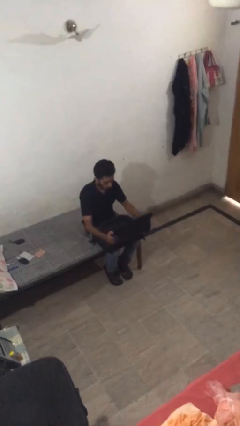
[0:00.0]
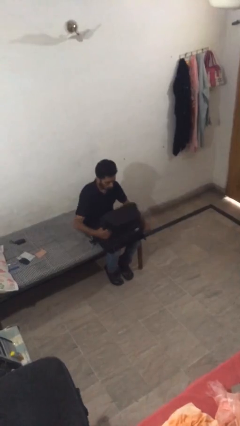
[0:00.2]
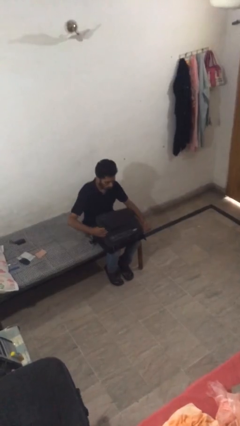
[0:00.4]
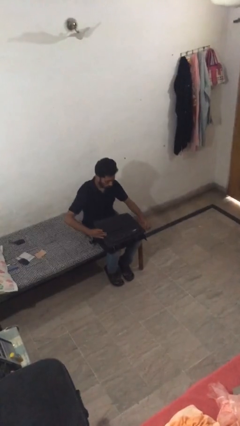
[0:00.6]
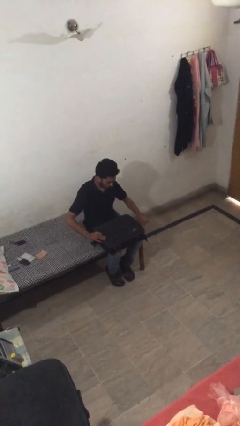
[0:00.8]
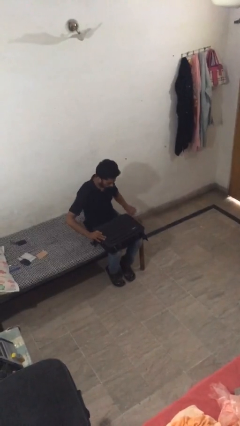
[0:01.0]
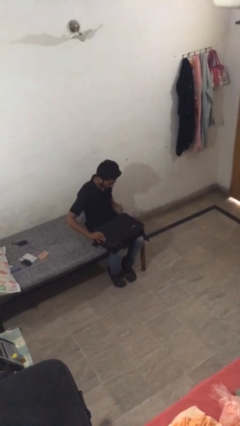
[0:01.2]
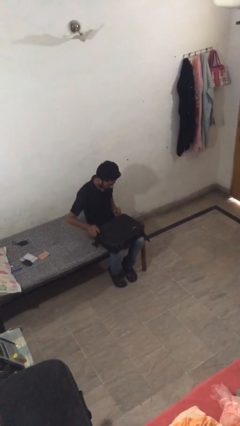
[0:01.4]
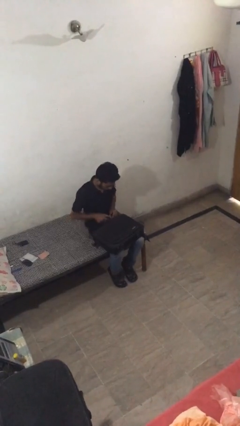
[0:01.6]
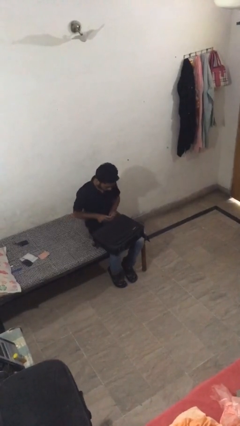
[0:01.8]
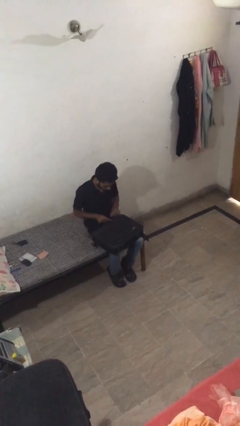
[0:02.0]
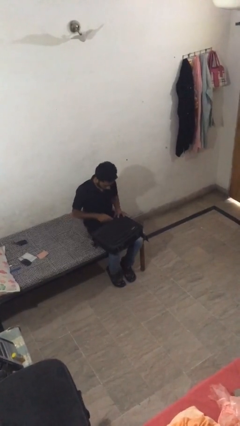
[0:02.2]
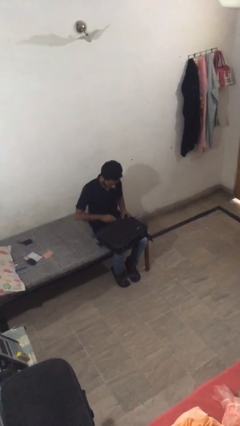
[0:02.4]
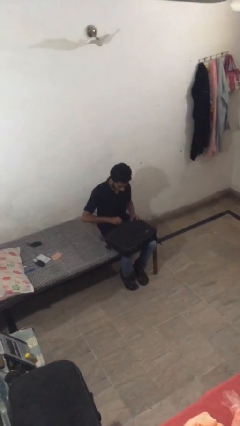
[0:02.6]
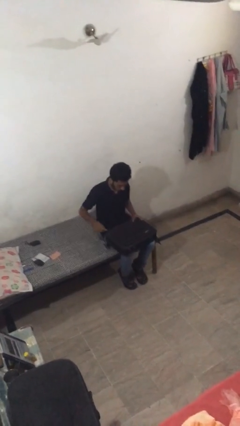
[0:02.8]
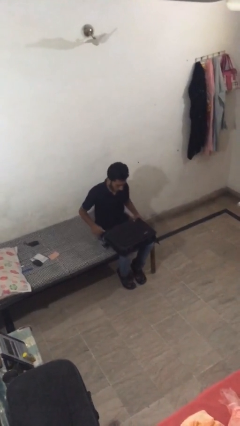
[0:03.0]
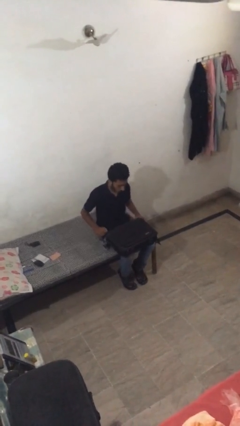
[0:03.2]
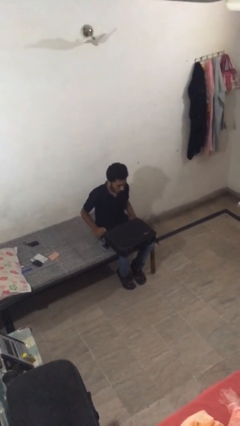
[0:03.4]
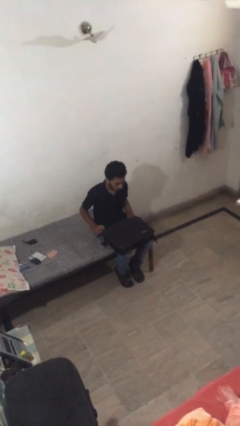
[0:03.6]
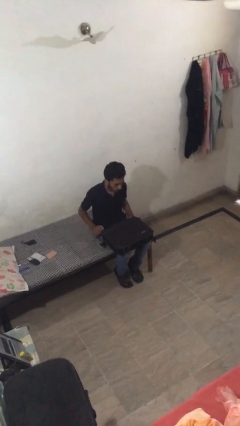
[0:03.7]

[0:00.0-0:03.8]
person closes suitcase

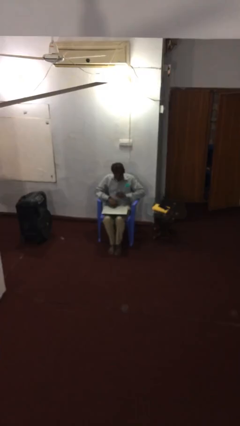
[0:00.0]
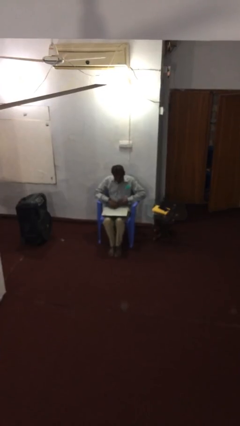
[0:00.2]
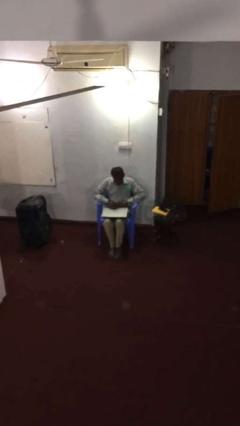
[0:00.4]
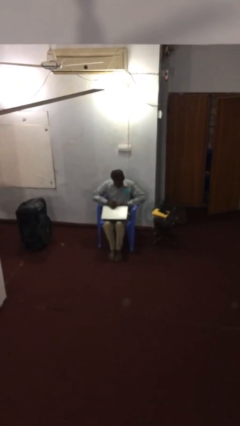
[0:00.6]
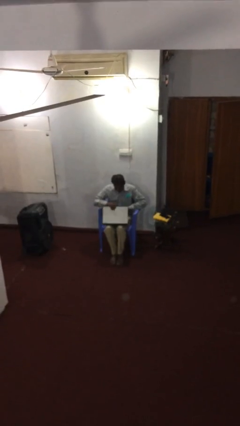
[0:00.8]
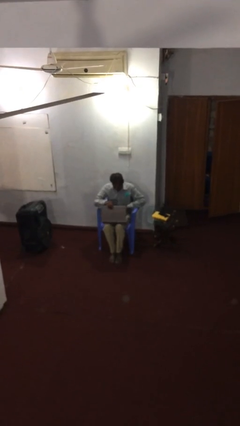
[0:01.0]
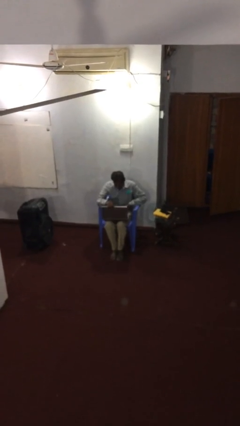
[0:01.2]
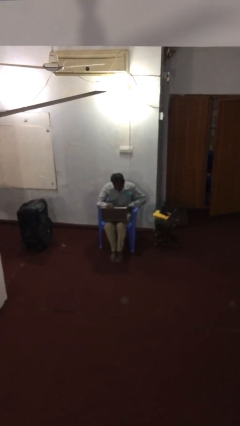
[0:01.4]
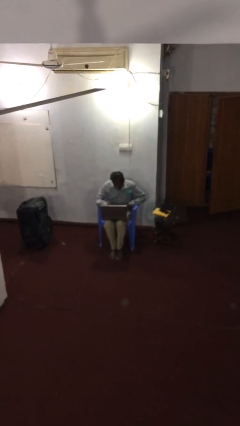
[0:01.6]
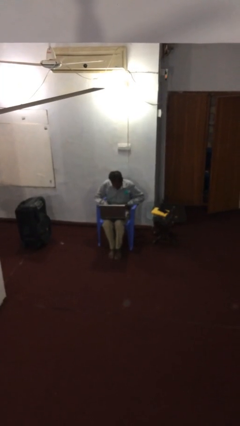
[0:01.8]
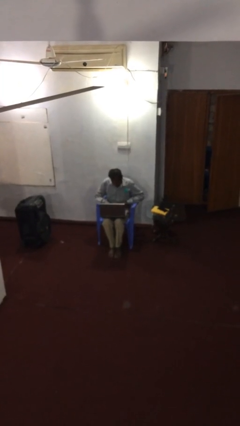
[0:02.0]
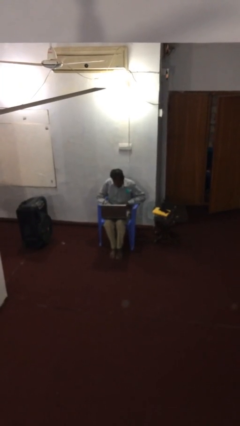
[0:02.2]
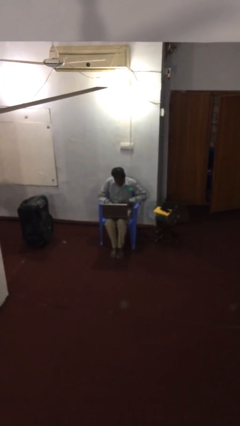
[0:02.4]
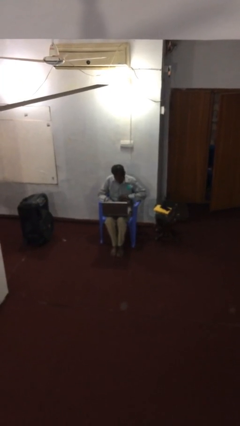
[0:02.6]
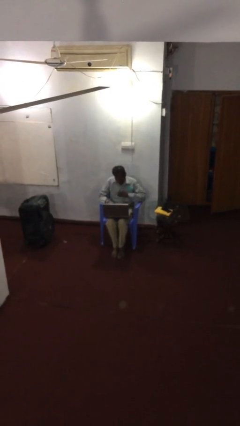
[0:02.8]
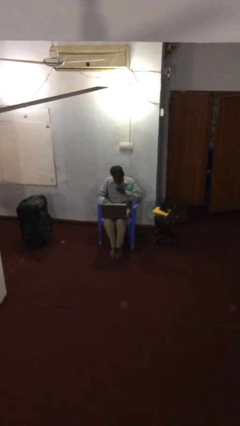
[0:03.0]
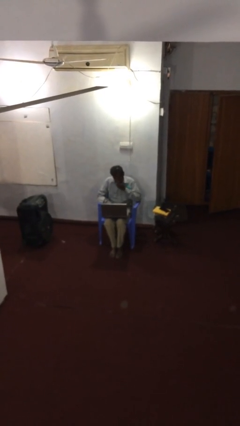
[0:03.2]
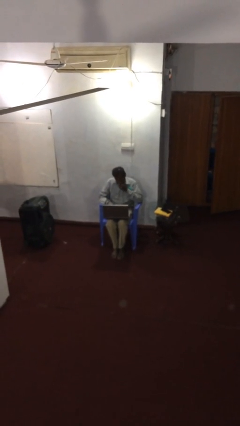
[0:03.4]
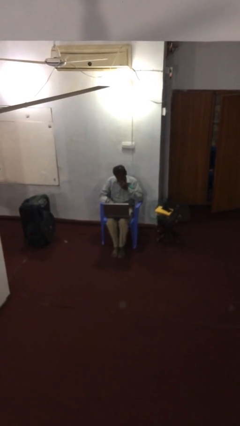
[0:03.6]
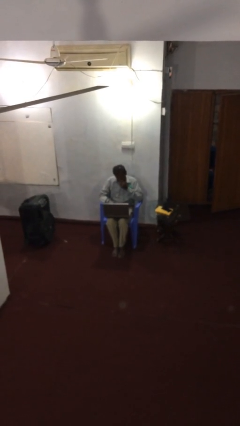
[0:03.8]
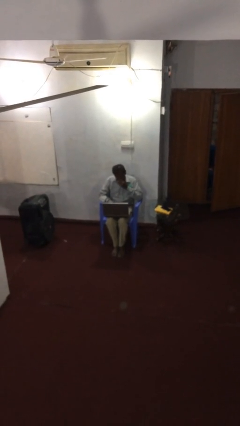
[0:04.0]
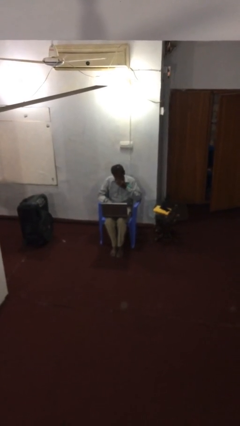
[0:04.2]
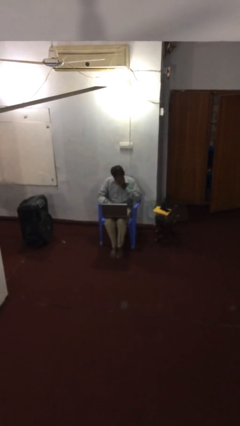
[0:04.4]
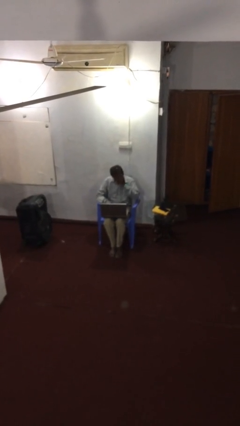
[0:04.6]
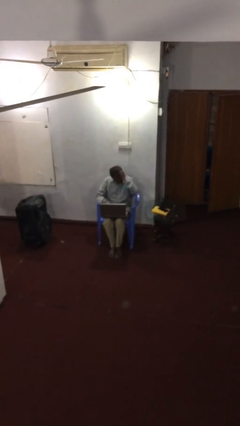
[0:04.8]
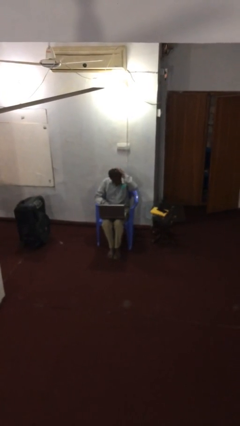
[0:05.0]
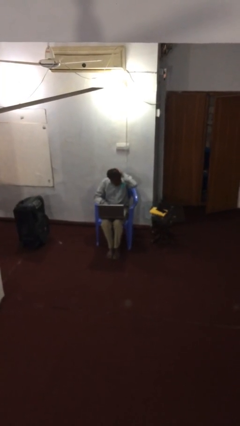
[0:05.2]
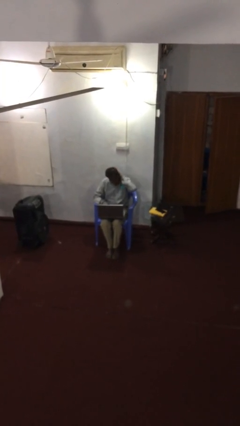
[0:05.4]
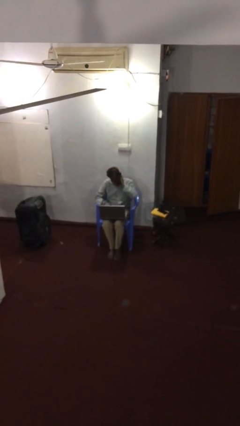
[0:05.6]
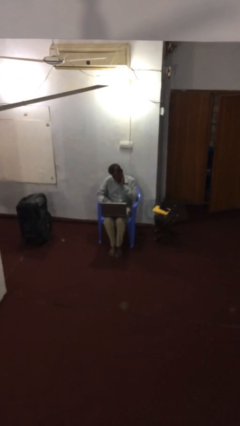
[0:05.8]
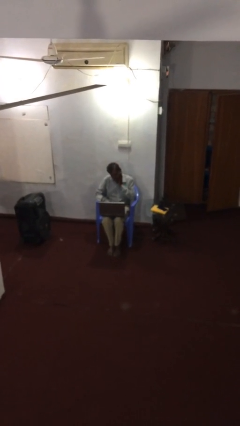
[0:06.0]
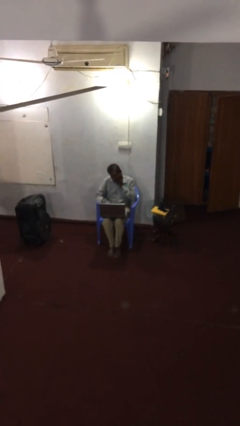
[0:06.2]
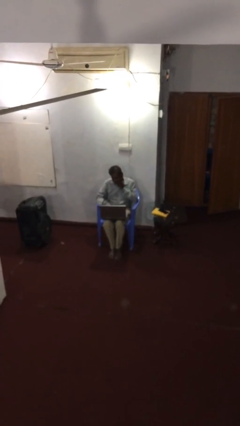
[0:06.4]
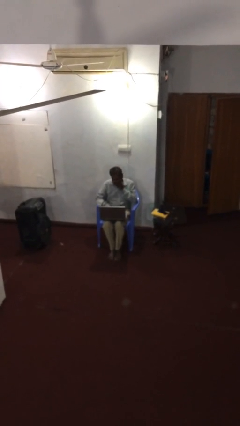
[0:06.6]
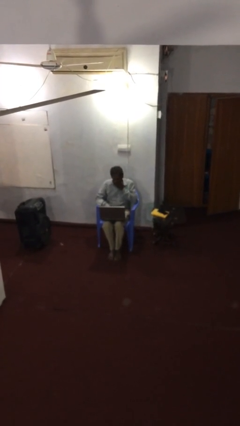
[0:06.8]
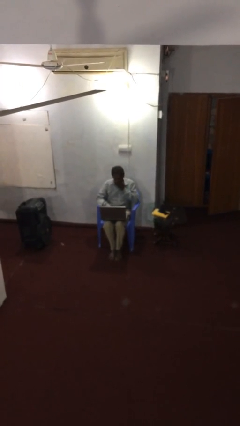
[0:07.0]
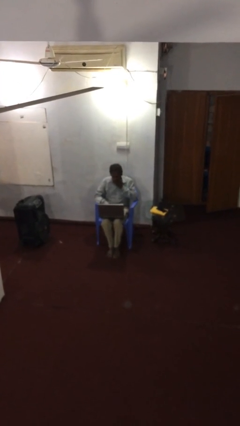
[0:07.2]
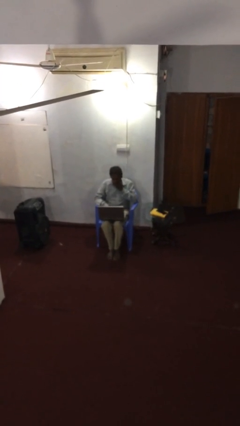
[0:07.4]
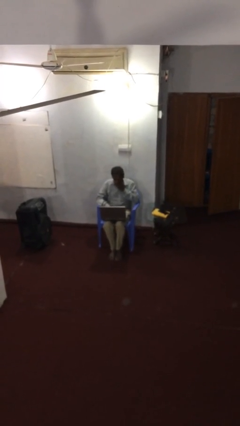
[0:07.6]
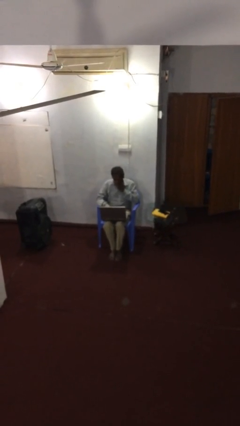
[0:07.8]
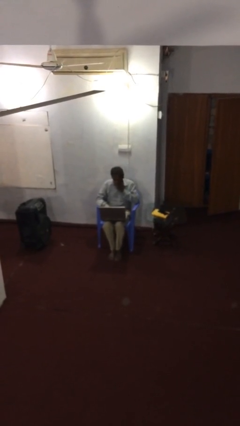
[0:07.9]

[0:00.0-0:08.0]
person interacts with laptop

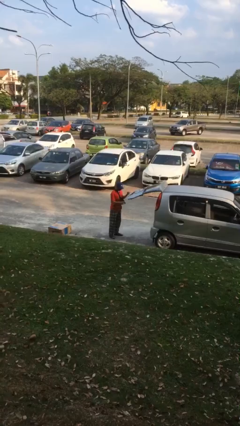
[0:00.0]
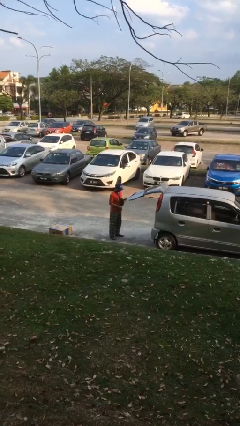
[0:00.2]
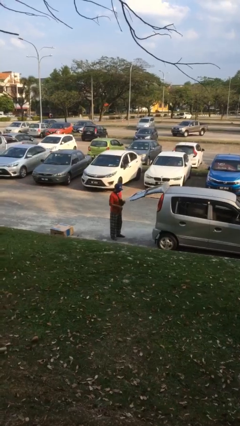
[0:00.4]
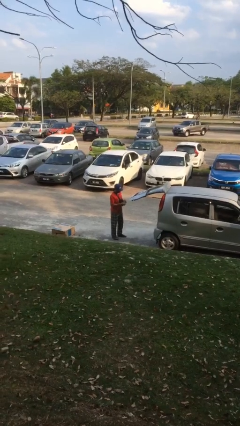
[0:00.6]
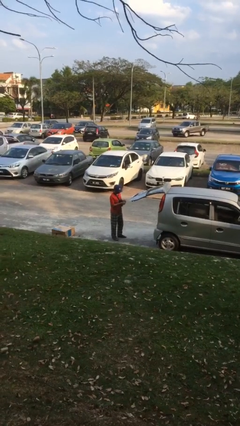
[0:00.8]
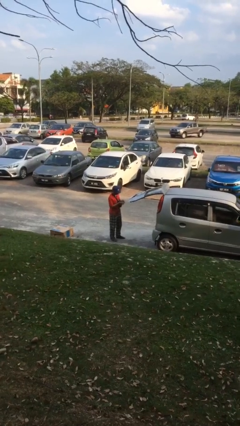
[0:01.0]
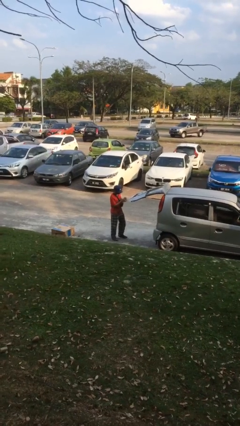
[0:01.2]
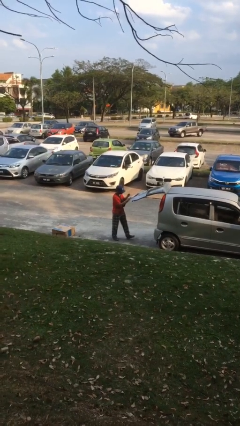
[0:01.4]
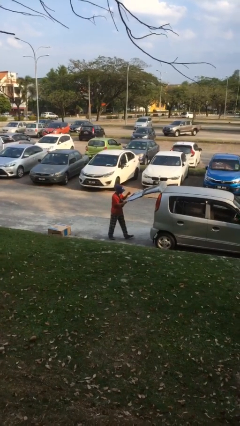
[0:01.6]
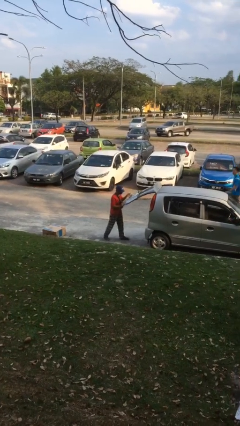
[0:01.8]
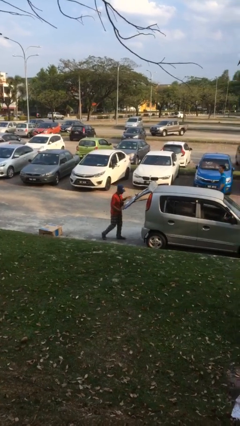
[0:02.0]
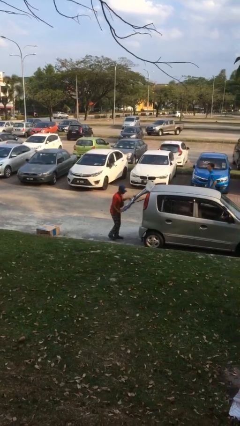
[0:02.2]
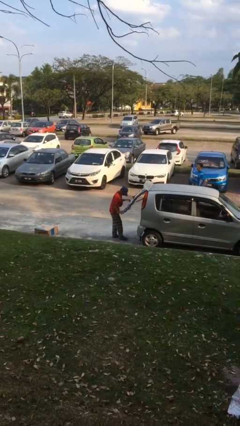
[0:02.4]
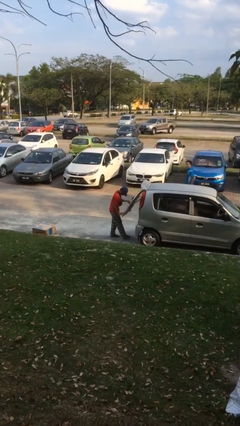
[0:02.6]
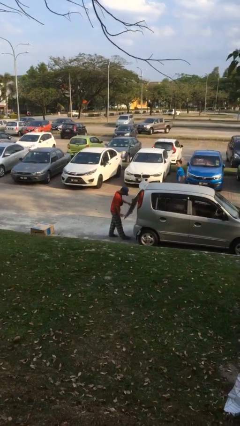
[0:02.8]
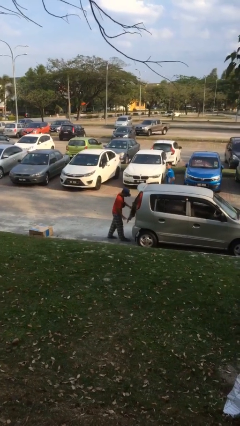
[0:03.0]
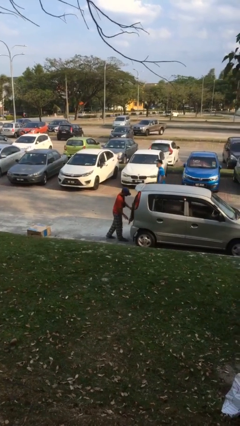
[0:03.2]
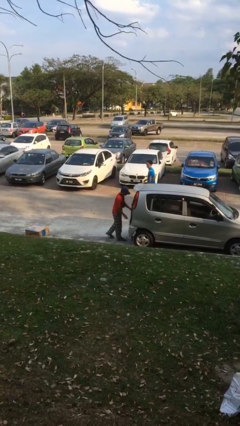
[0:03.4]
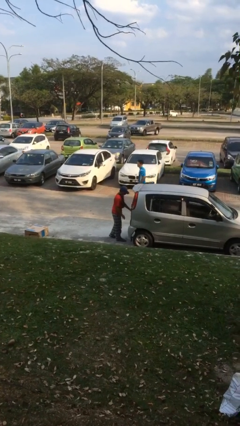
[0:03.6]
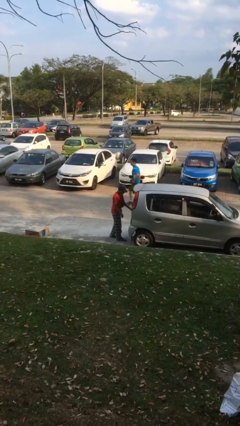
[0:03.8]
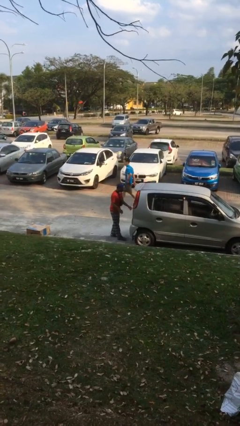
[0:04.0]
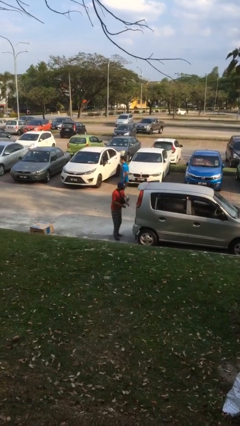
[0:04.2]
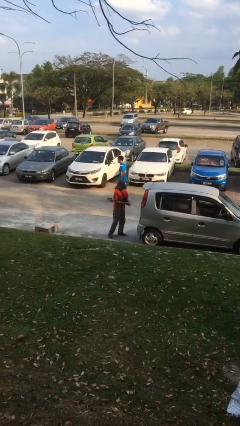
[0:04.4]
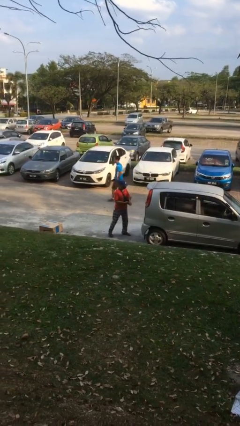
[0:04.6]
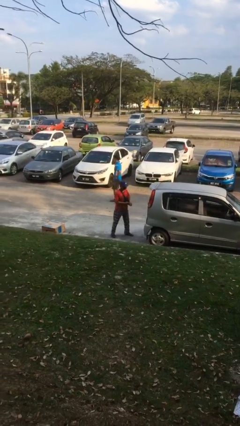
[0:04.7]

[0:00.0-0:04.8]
person closes car trunk

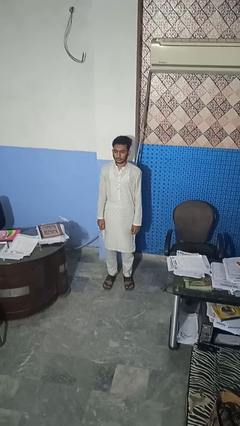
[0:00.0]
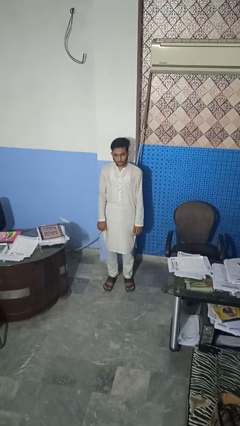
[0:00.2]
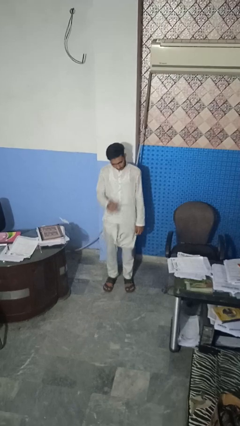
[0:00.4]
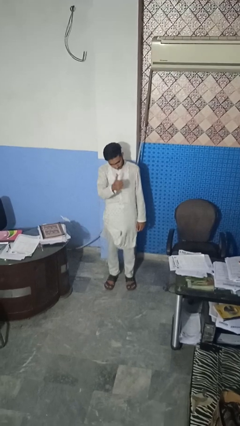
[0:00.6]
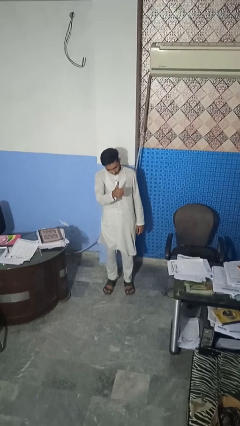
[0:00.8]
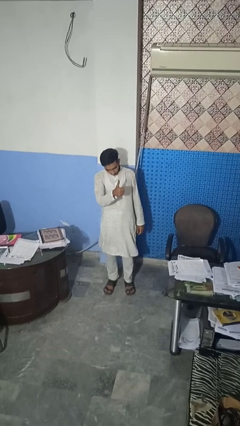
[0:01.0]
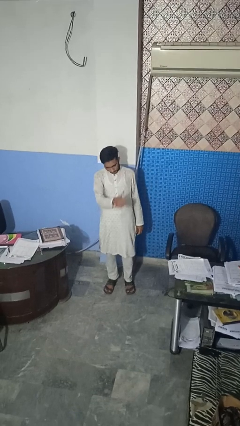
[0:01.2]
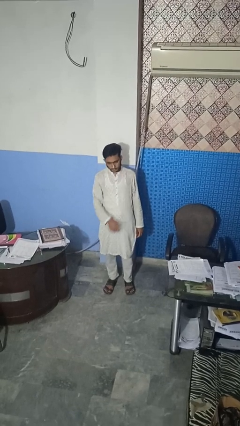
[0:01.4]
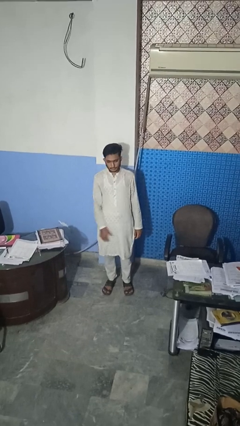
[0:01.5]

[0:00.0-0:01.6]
person gestures thumbs up
